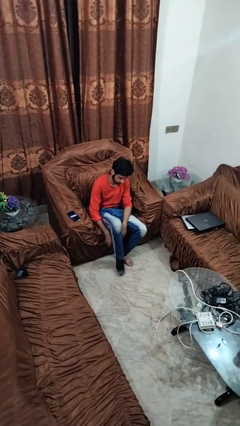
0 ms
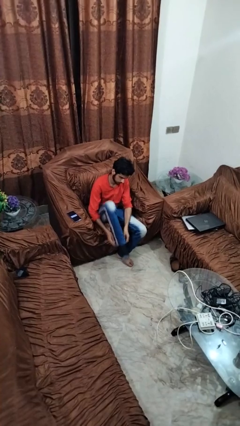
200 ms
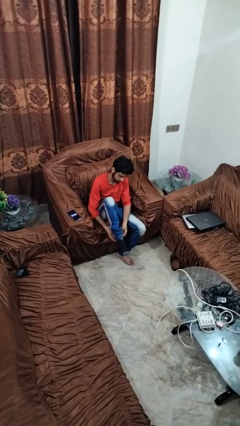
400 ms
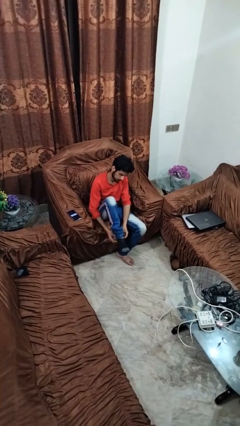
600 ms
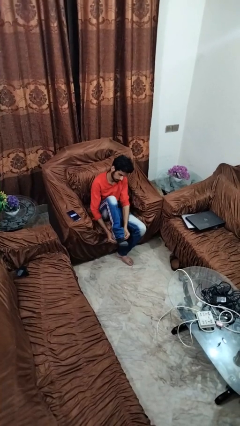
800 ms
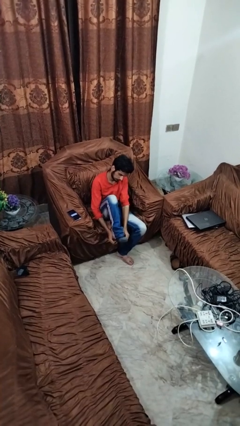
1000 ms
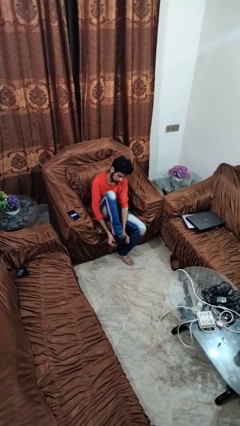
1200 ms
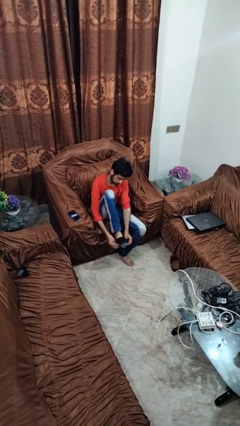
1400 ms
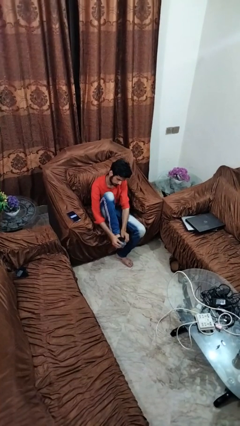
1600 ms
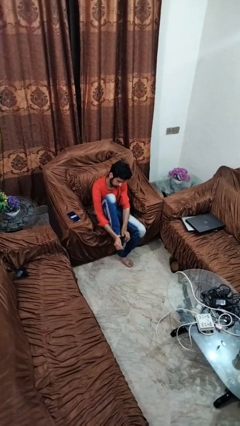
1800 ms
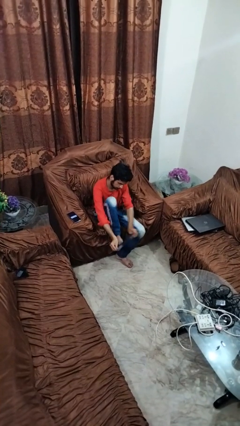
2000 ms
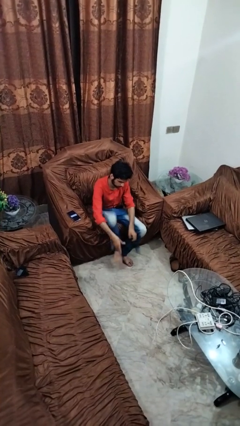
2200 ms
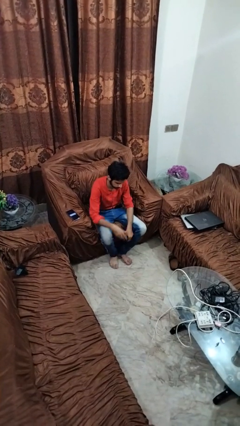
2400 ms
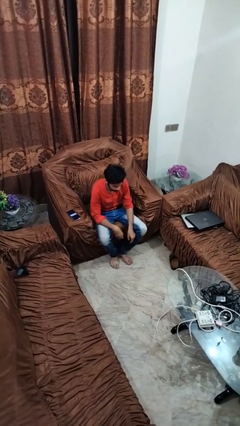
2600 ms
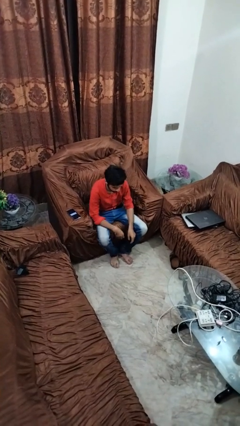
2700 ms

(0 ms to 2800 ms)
person takes off socks

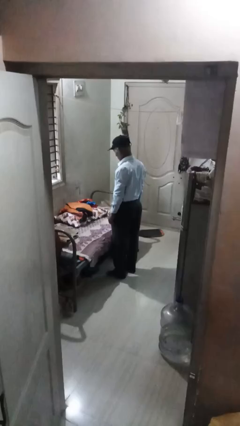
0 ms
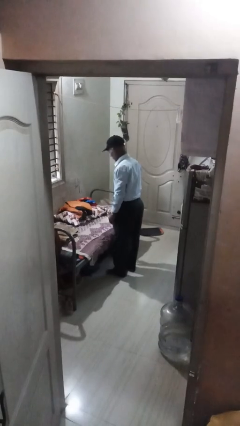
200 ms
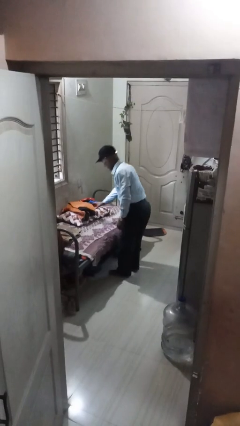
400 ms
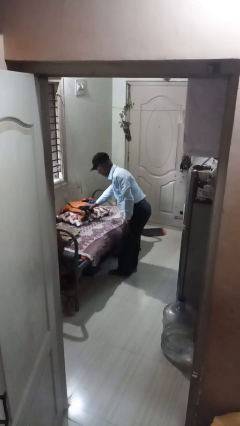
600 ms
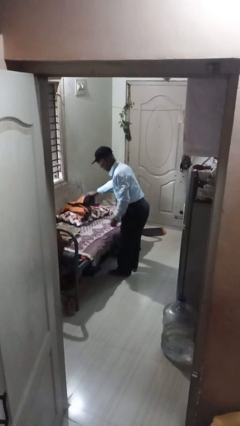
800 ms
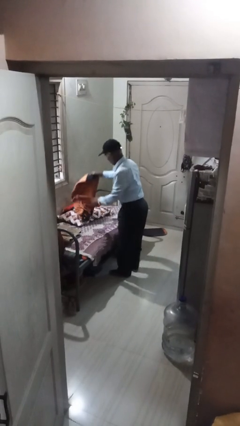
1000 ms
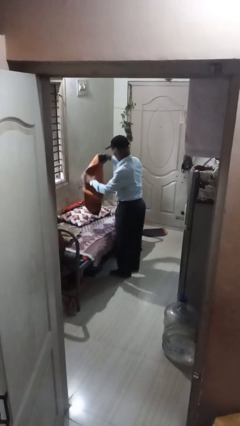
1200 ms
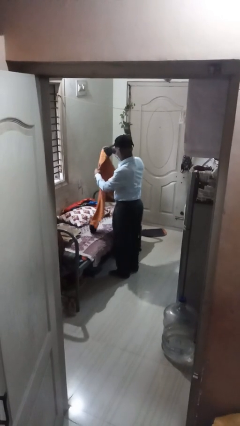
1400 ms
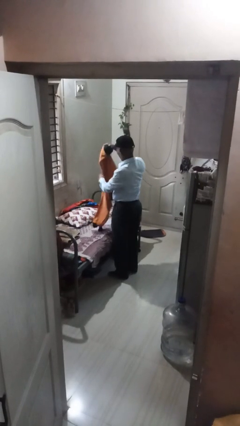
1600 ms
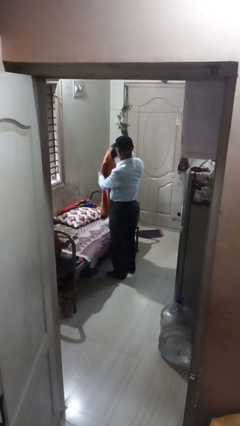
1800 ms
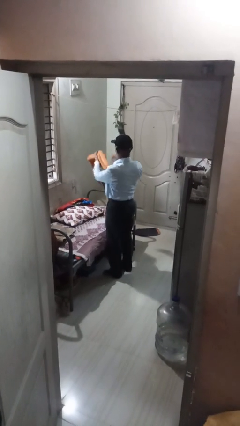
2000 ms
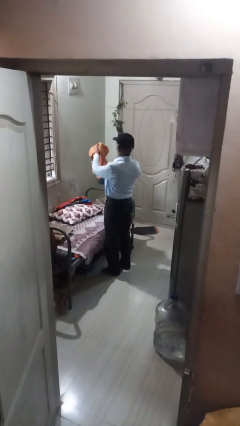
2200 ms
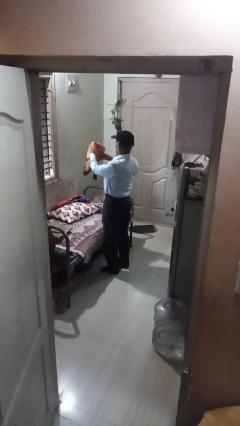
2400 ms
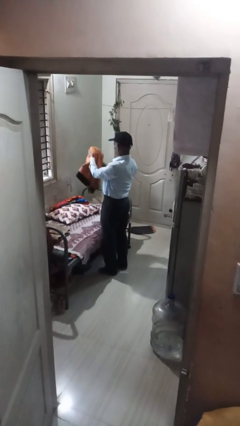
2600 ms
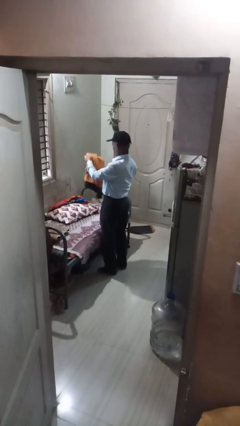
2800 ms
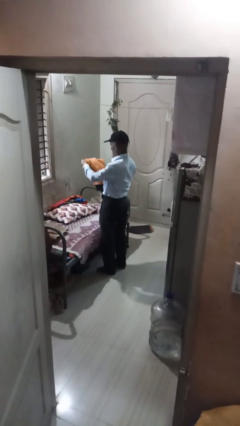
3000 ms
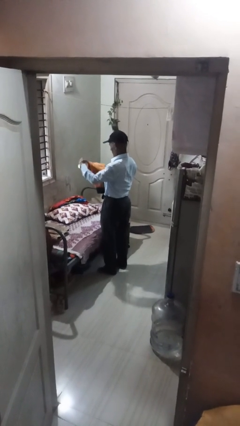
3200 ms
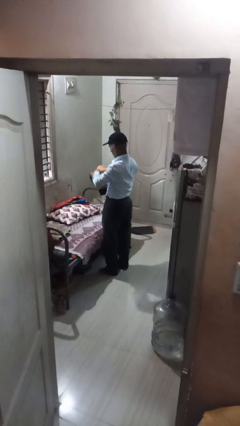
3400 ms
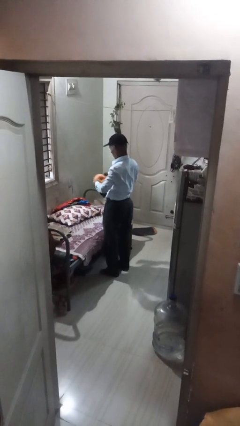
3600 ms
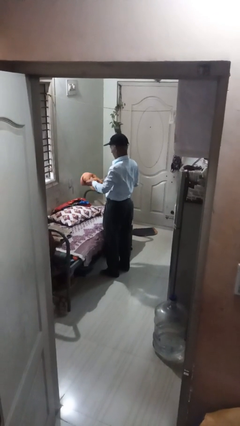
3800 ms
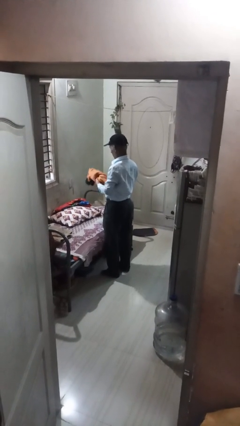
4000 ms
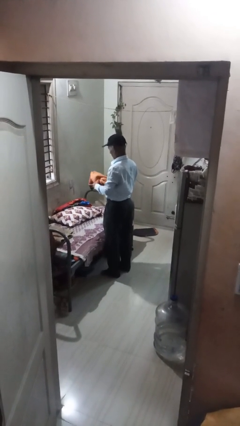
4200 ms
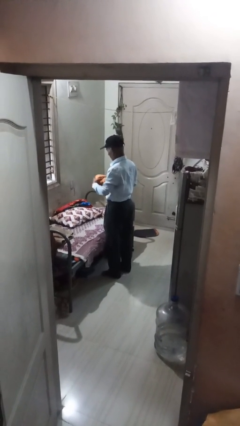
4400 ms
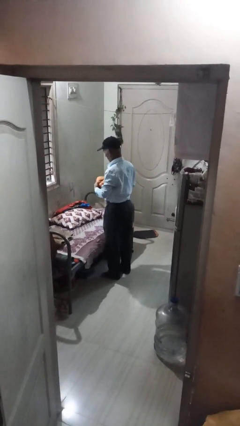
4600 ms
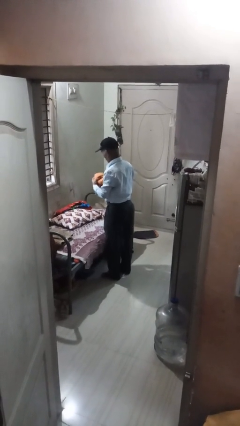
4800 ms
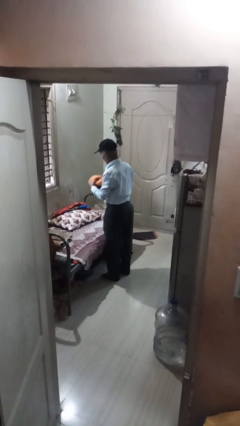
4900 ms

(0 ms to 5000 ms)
person folds shirt

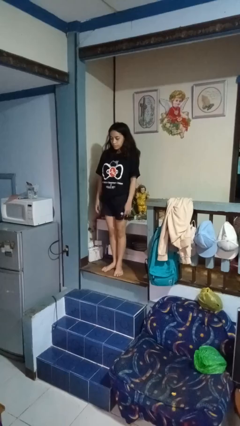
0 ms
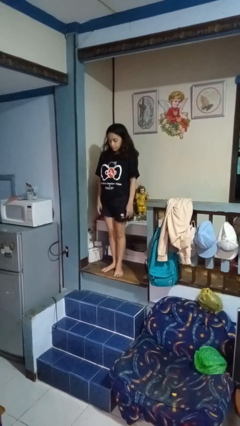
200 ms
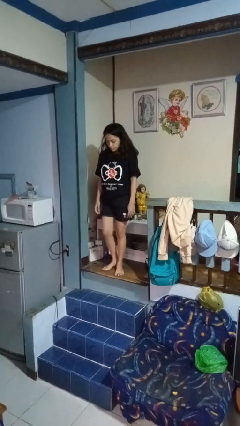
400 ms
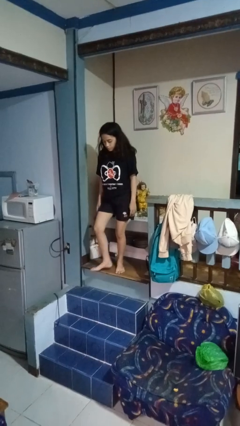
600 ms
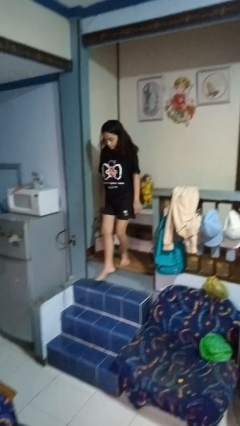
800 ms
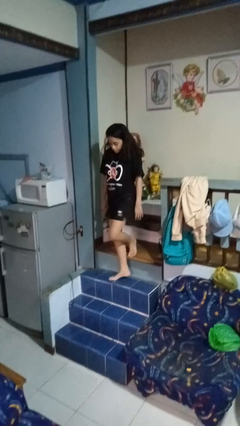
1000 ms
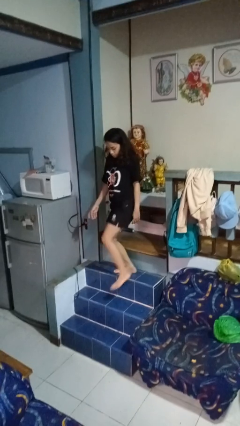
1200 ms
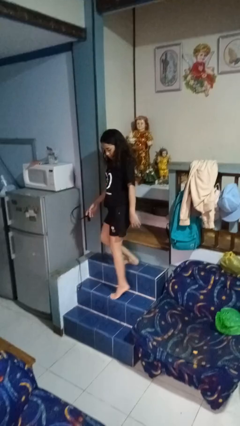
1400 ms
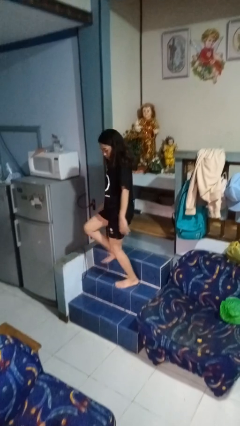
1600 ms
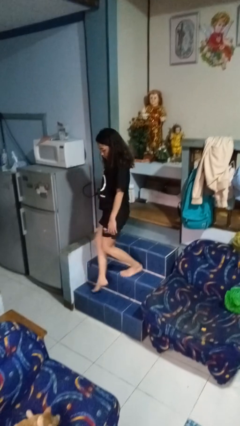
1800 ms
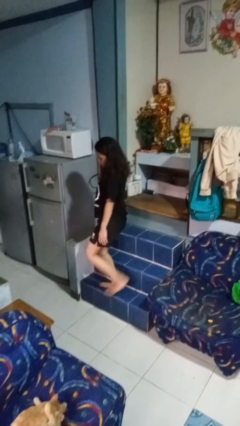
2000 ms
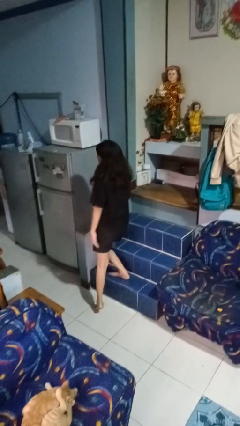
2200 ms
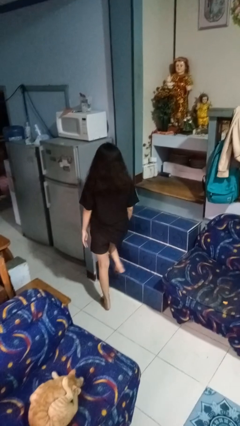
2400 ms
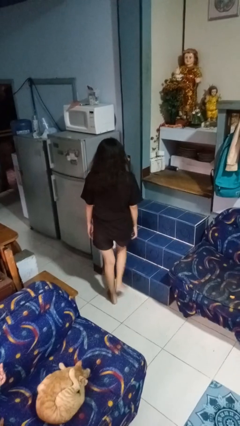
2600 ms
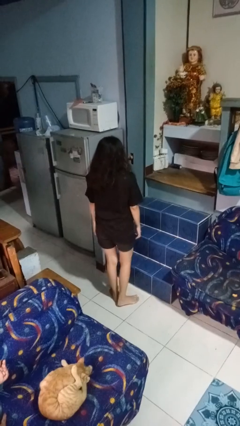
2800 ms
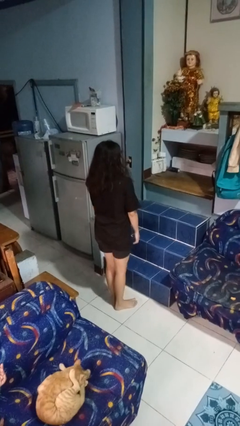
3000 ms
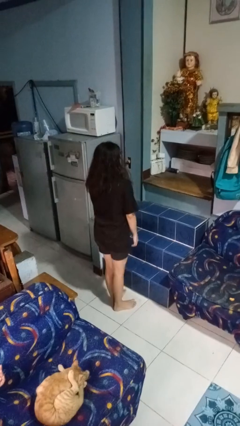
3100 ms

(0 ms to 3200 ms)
person climbs down stairs

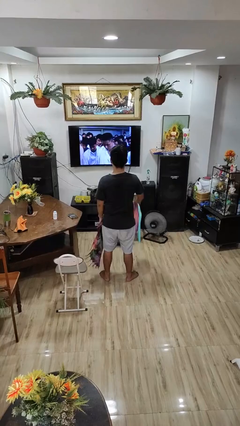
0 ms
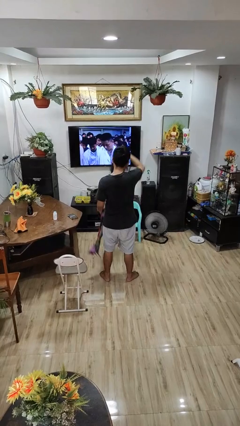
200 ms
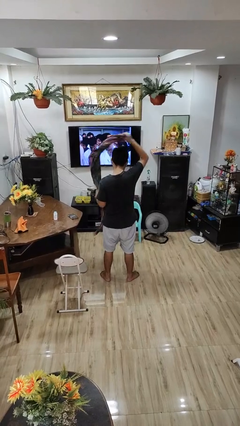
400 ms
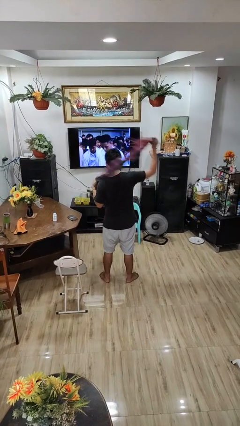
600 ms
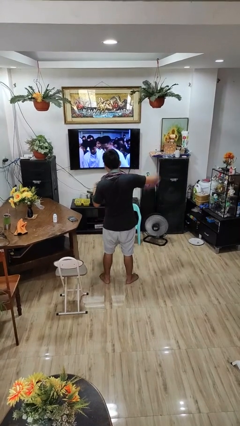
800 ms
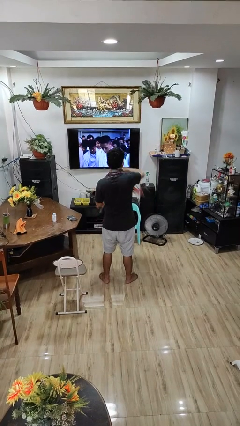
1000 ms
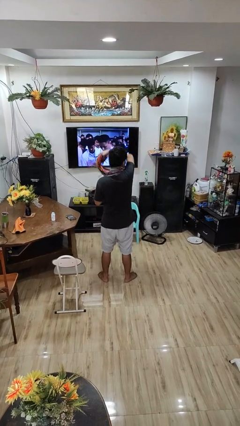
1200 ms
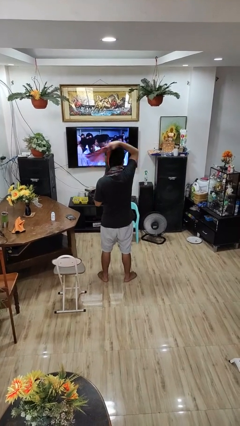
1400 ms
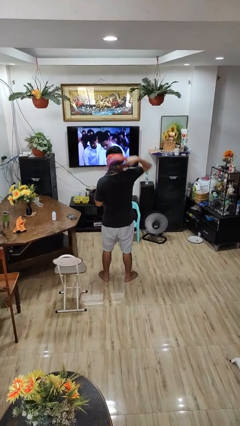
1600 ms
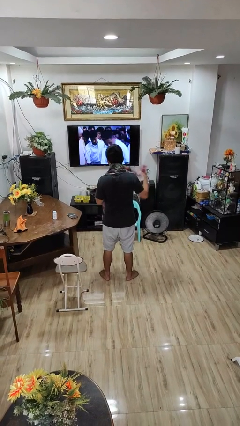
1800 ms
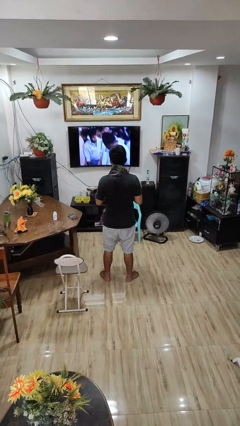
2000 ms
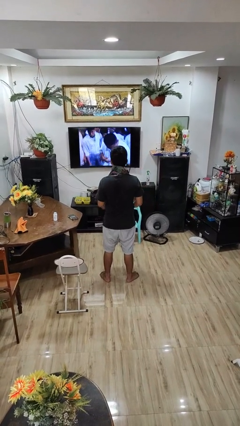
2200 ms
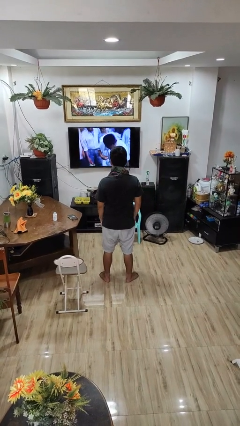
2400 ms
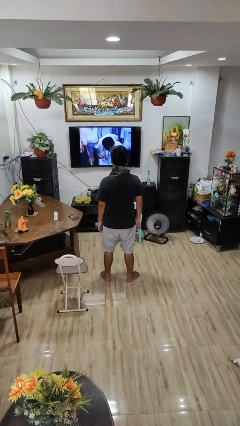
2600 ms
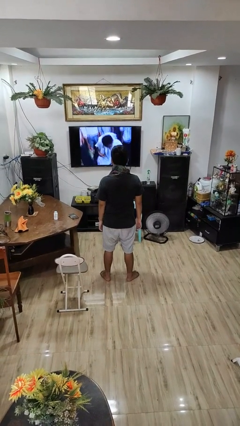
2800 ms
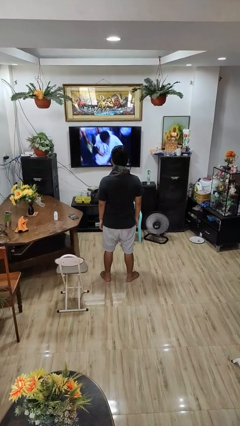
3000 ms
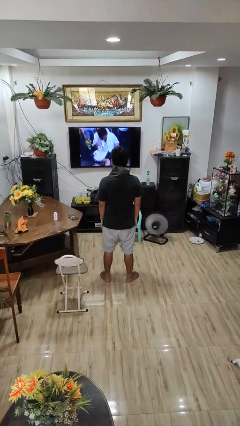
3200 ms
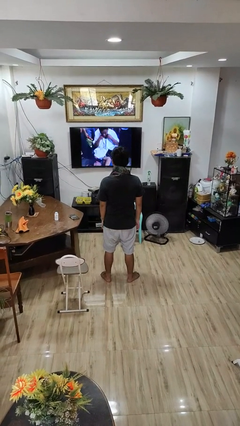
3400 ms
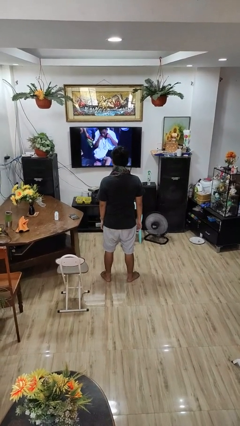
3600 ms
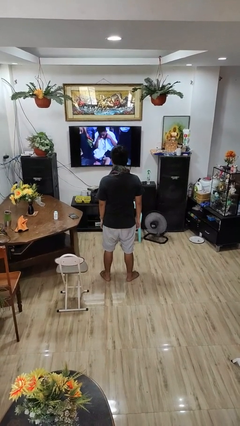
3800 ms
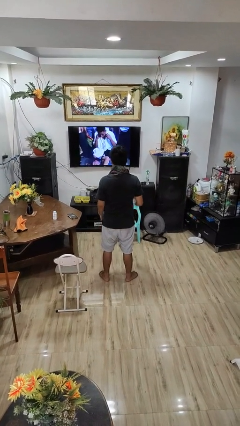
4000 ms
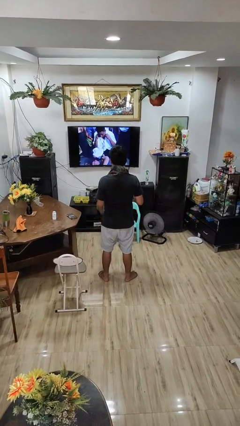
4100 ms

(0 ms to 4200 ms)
person puts on scarf

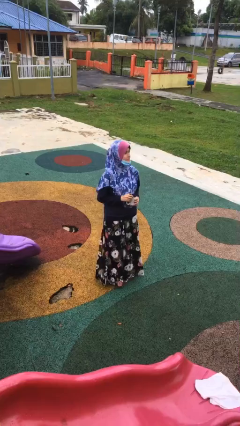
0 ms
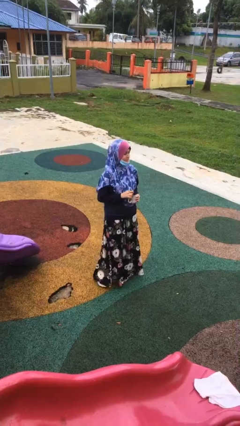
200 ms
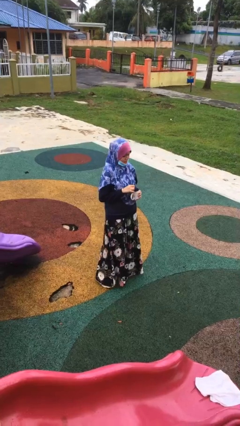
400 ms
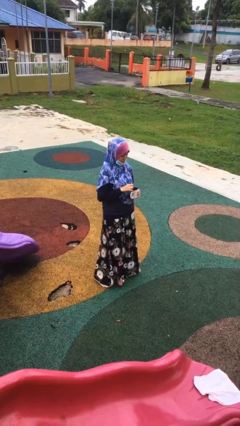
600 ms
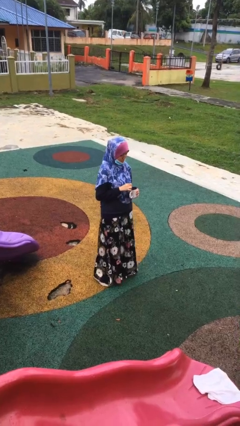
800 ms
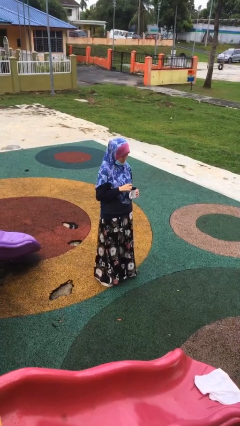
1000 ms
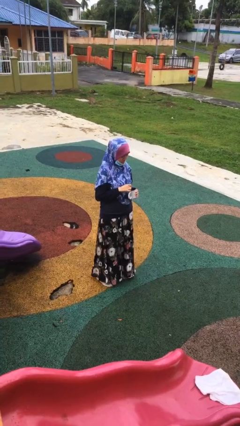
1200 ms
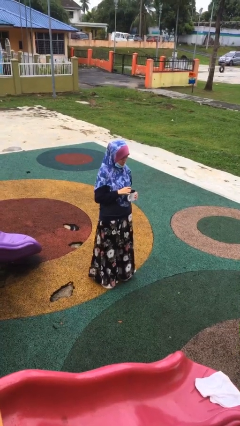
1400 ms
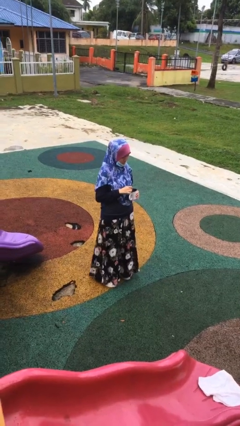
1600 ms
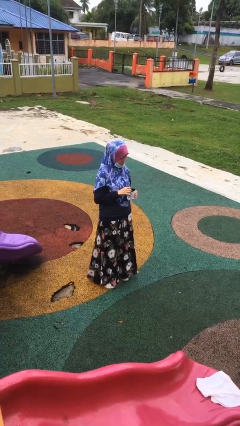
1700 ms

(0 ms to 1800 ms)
person stirs mug

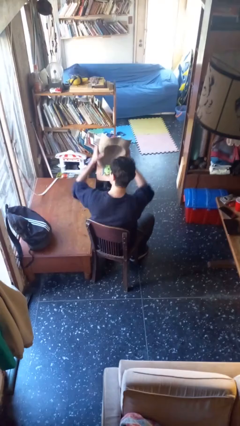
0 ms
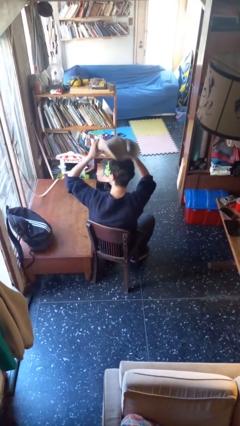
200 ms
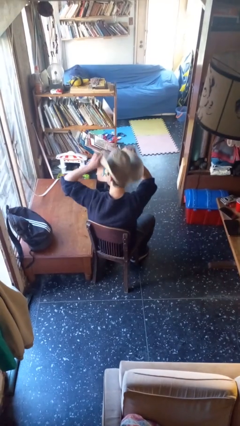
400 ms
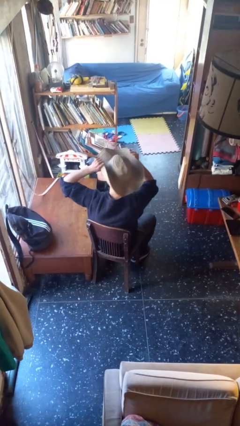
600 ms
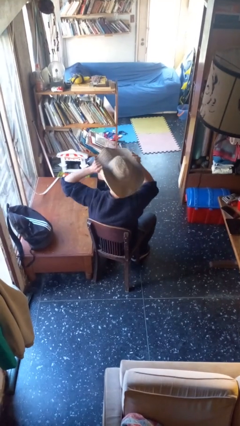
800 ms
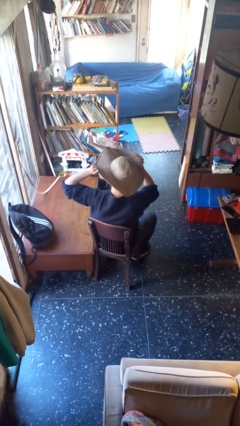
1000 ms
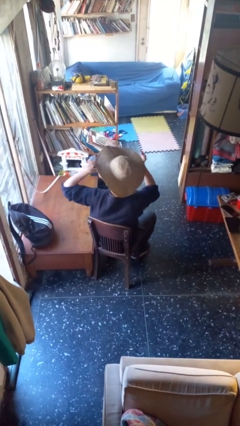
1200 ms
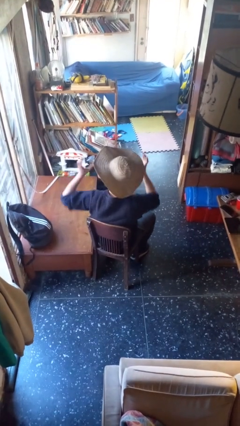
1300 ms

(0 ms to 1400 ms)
person puts on hat
